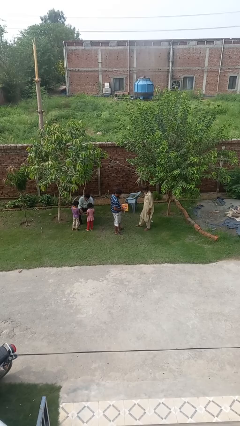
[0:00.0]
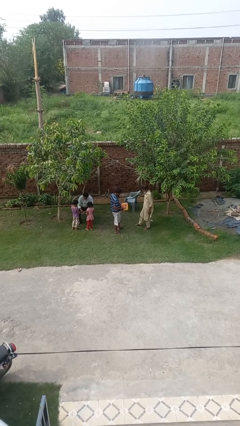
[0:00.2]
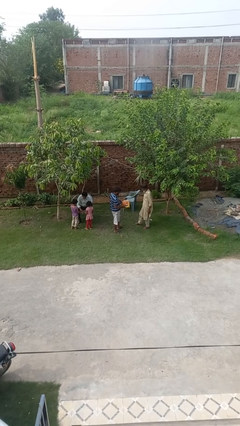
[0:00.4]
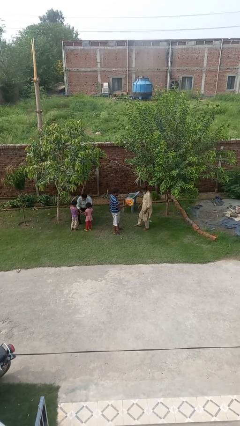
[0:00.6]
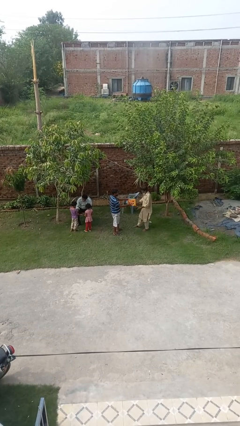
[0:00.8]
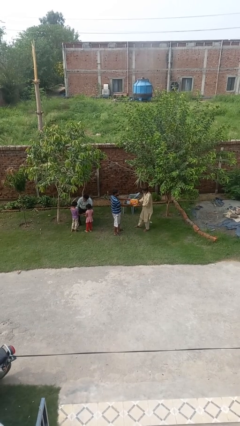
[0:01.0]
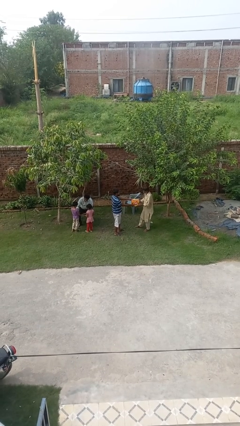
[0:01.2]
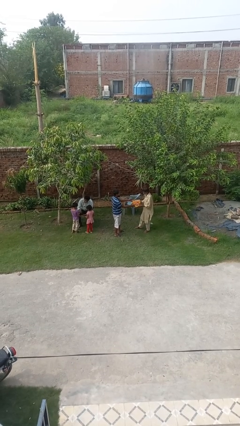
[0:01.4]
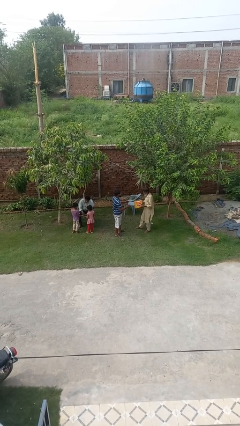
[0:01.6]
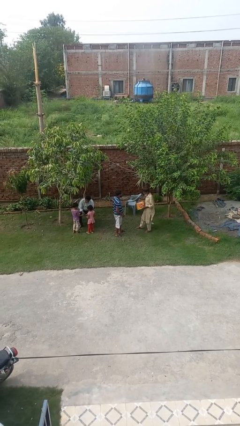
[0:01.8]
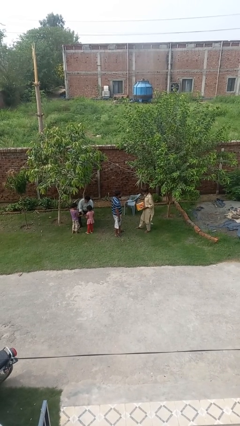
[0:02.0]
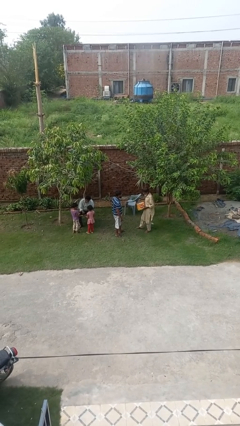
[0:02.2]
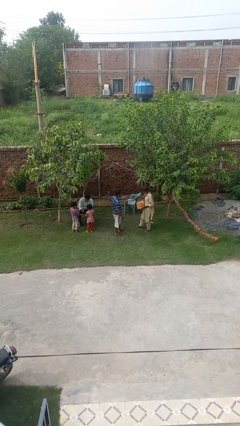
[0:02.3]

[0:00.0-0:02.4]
person transfers object to person

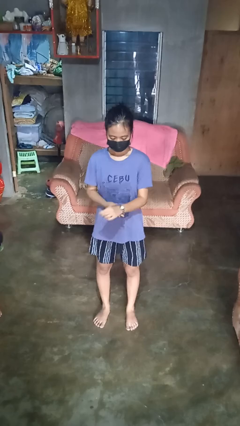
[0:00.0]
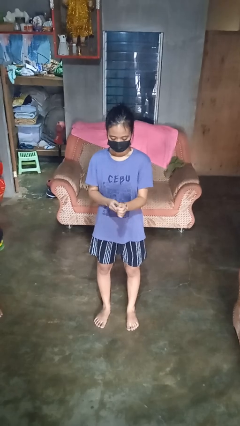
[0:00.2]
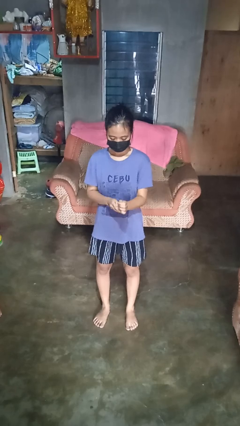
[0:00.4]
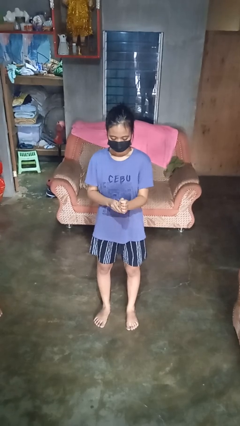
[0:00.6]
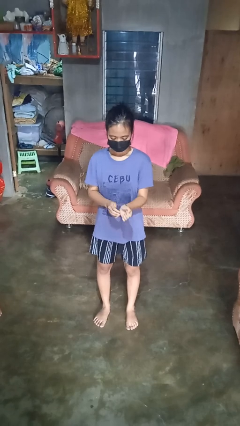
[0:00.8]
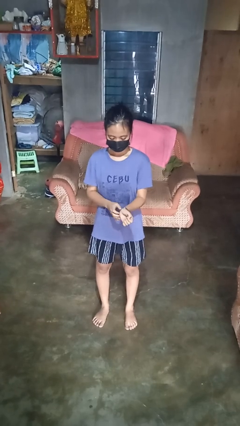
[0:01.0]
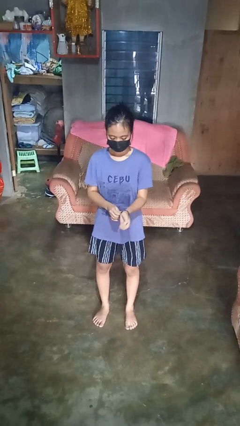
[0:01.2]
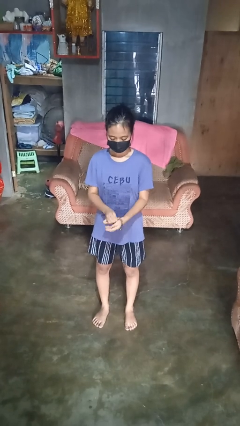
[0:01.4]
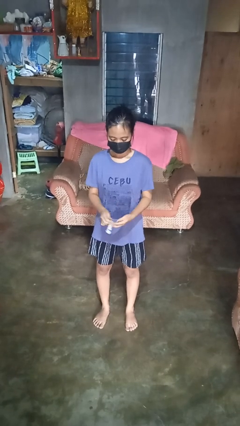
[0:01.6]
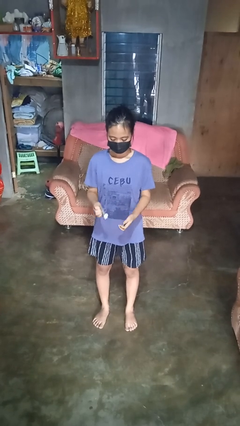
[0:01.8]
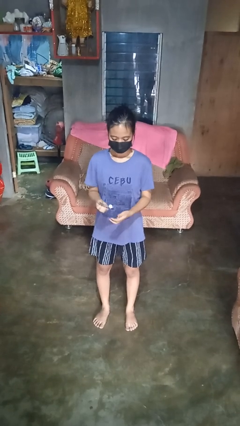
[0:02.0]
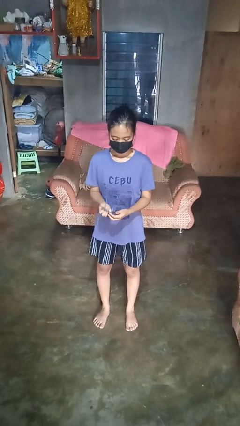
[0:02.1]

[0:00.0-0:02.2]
person takes off wristwatch

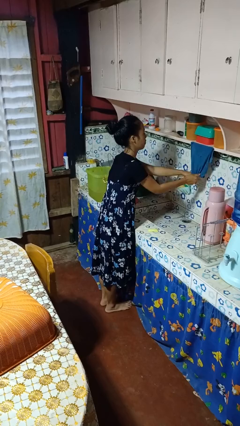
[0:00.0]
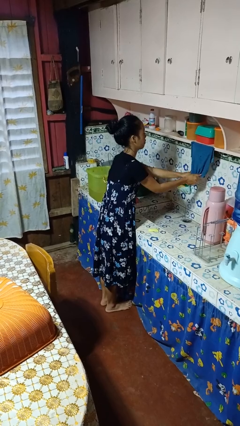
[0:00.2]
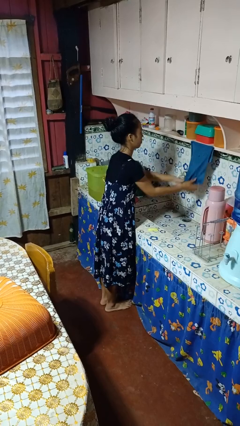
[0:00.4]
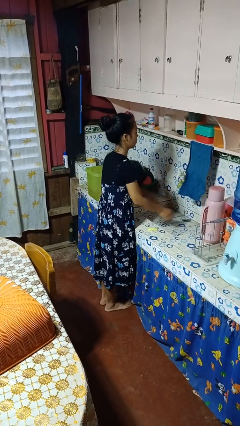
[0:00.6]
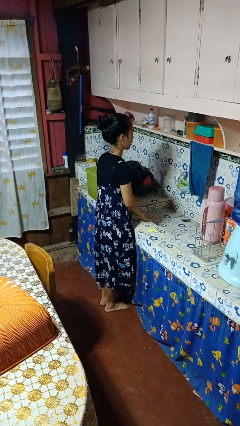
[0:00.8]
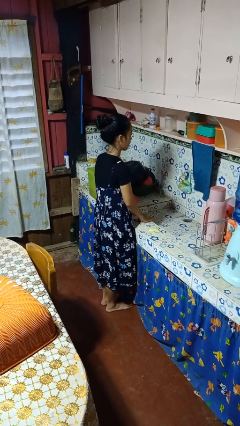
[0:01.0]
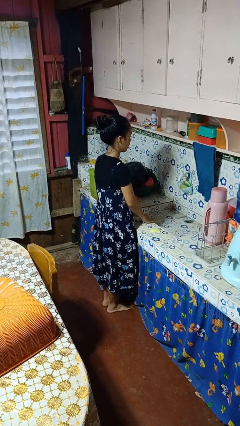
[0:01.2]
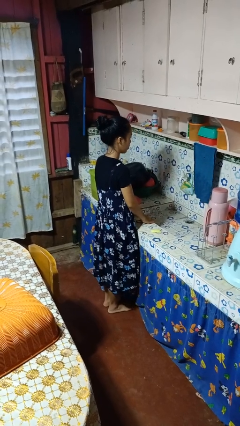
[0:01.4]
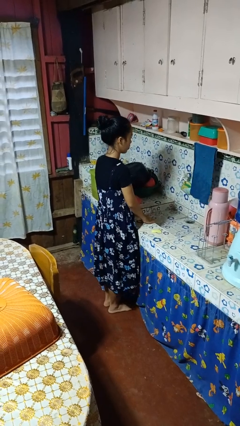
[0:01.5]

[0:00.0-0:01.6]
person dries hands with towel

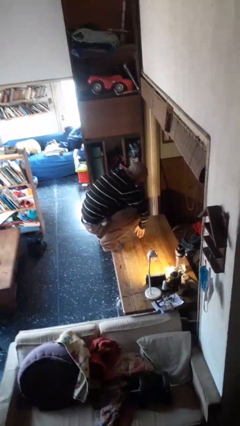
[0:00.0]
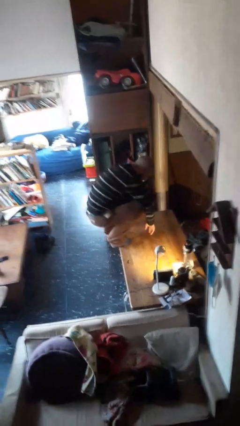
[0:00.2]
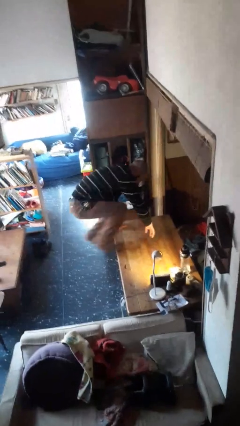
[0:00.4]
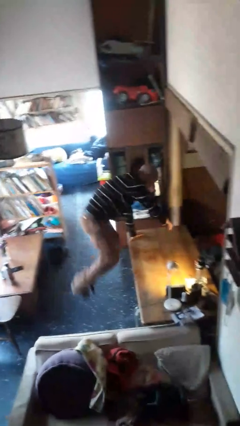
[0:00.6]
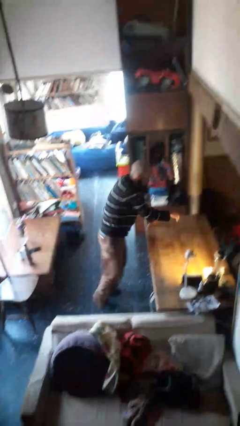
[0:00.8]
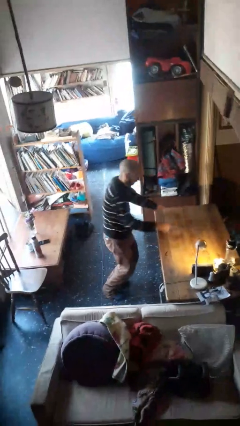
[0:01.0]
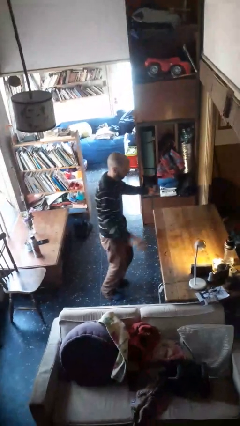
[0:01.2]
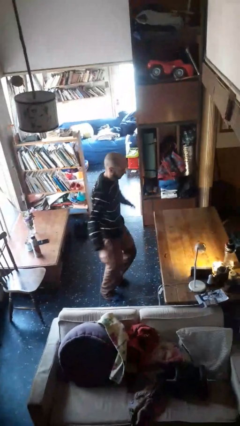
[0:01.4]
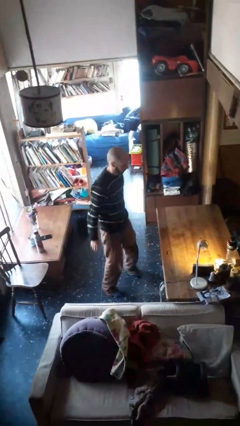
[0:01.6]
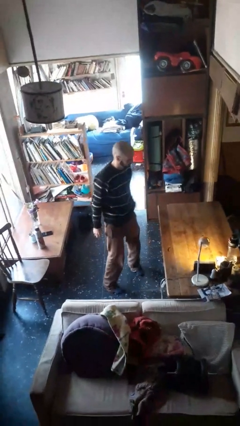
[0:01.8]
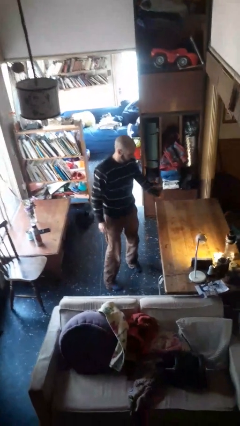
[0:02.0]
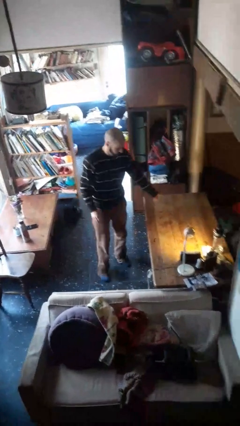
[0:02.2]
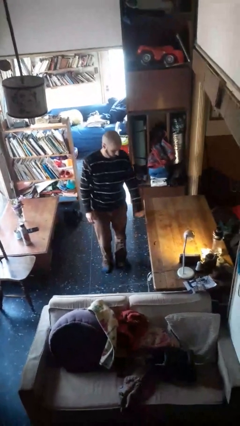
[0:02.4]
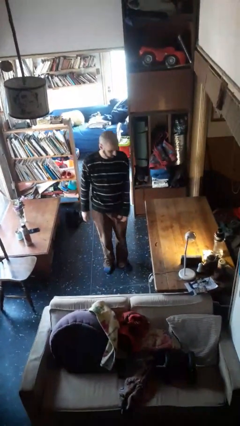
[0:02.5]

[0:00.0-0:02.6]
person climbs off table

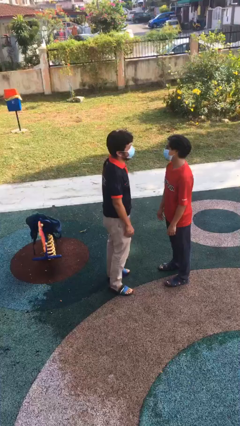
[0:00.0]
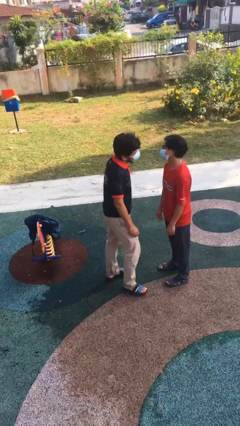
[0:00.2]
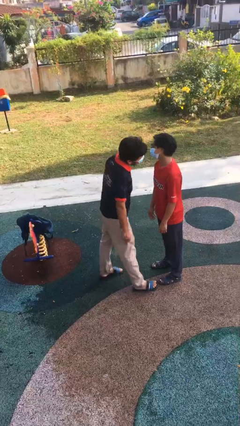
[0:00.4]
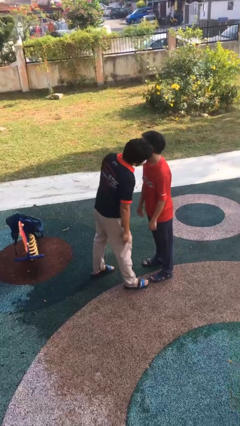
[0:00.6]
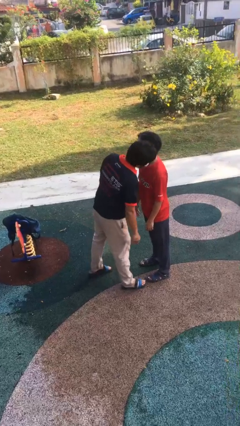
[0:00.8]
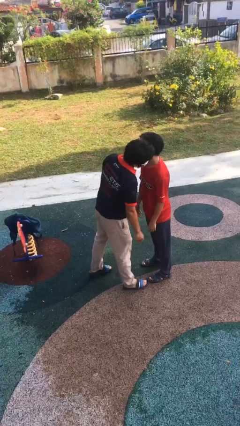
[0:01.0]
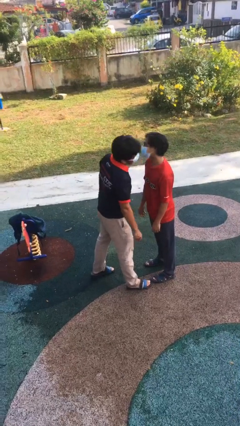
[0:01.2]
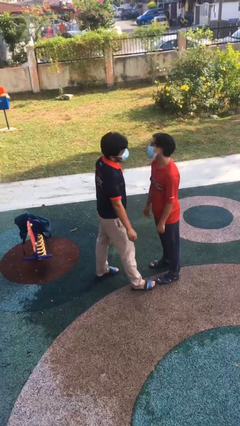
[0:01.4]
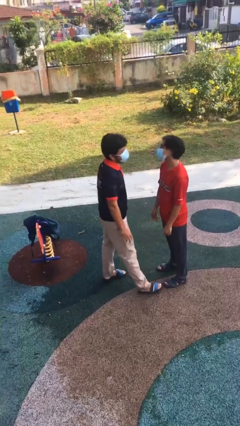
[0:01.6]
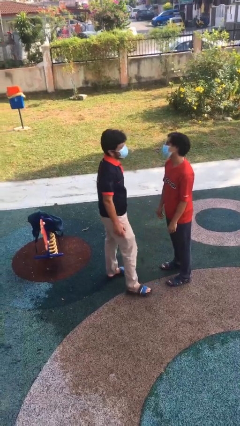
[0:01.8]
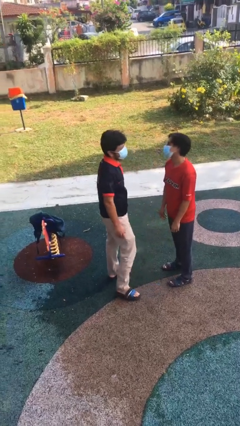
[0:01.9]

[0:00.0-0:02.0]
person kisses cheek of person

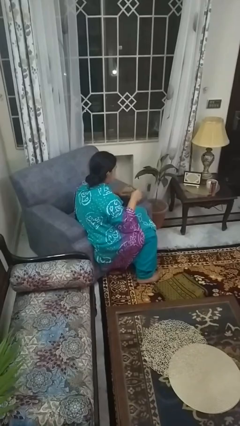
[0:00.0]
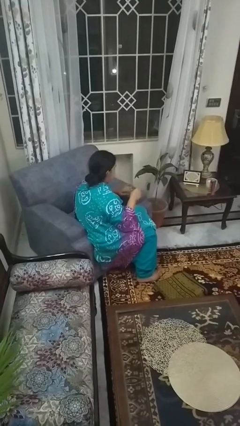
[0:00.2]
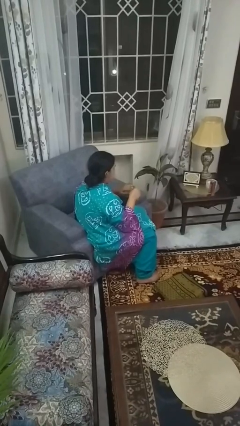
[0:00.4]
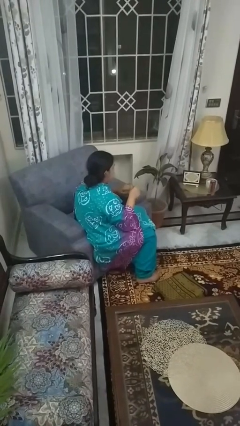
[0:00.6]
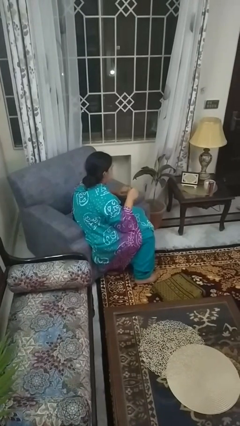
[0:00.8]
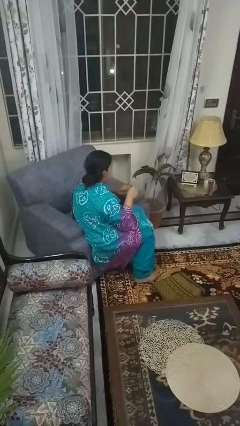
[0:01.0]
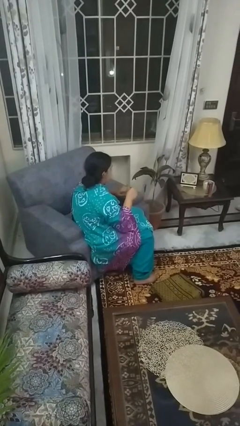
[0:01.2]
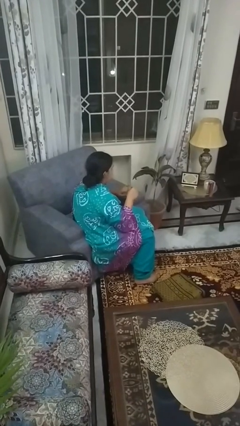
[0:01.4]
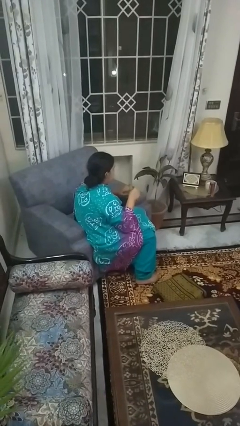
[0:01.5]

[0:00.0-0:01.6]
person files fingernails

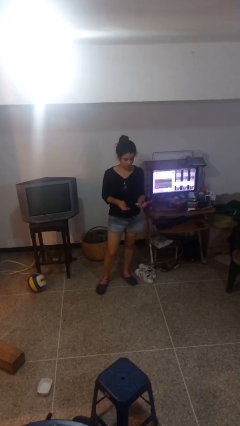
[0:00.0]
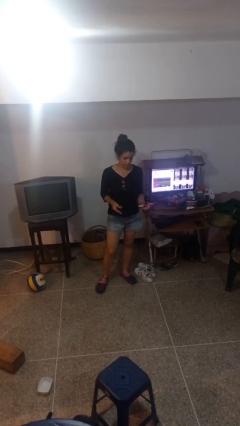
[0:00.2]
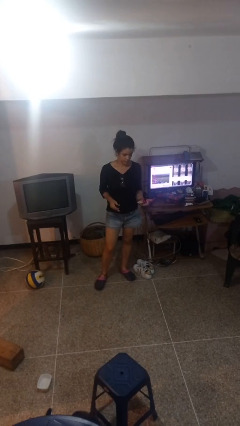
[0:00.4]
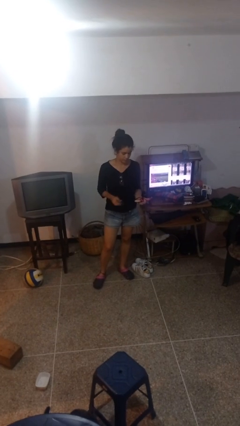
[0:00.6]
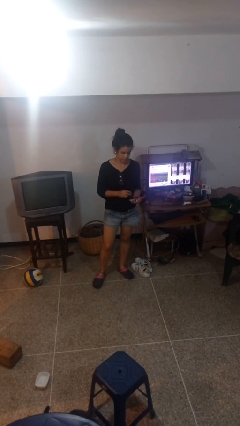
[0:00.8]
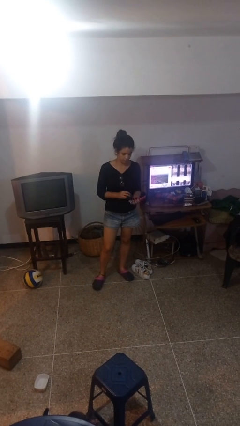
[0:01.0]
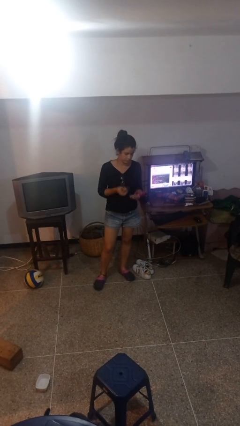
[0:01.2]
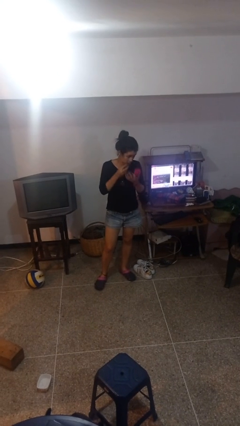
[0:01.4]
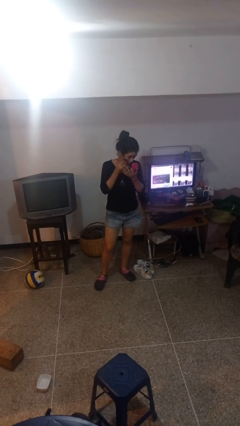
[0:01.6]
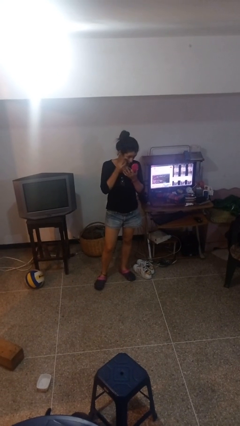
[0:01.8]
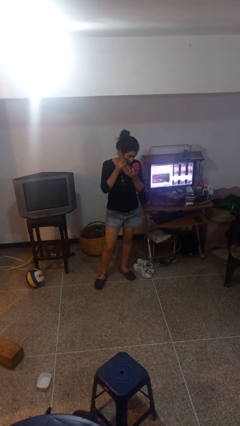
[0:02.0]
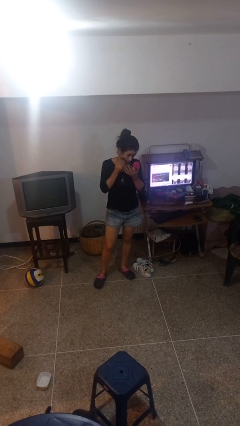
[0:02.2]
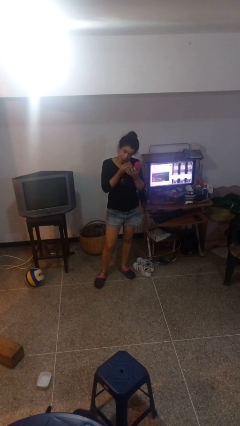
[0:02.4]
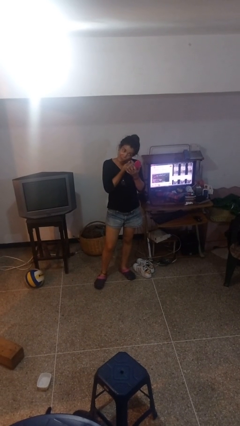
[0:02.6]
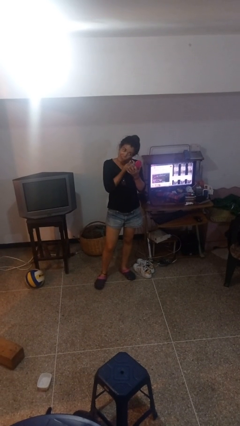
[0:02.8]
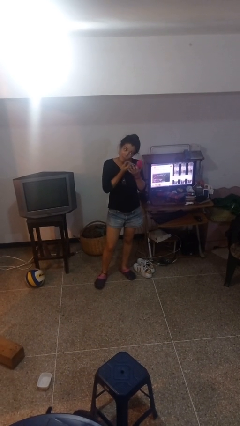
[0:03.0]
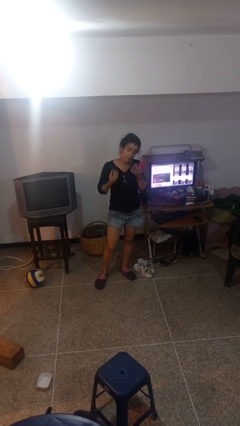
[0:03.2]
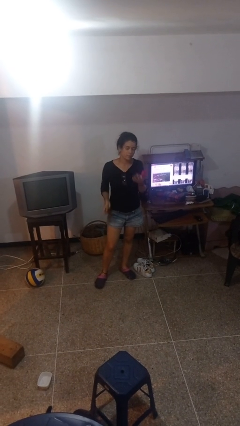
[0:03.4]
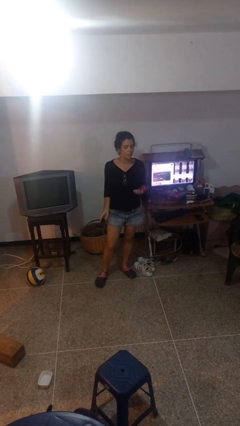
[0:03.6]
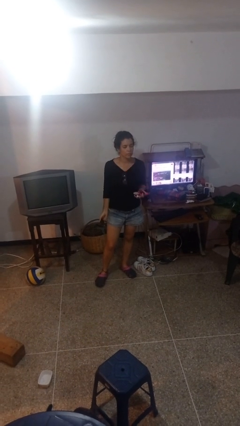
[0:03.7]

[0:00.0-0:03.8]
person applies foundation makeup

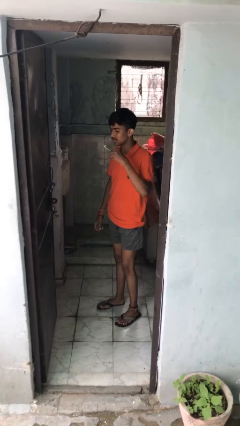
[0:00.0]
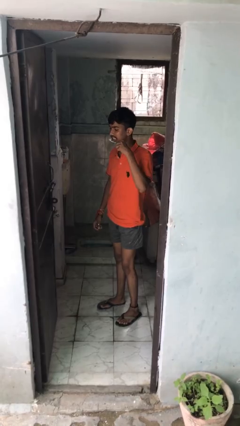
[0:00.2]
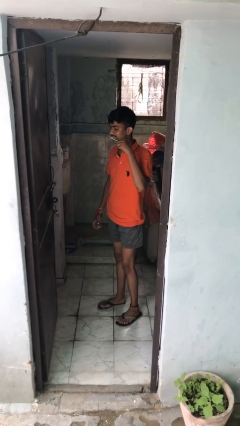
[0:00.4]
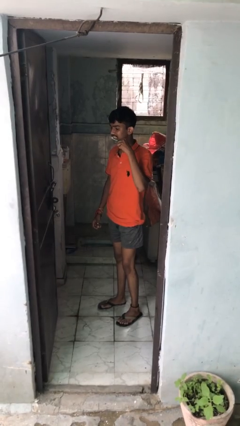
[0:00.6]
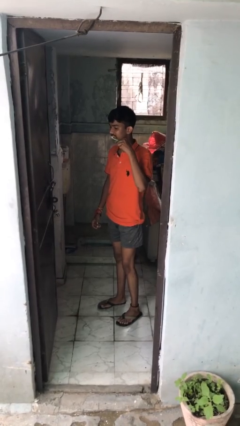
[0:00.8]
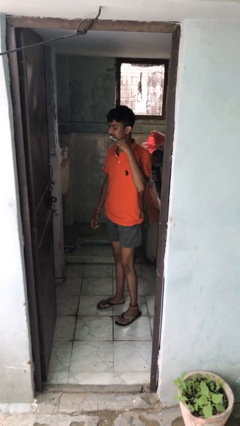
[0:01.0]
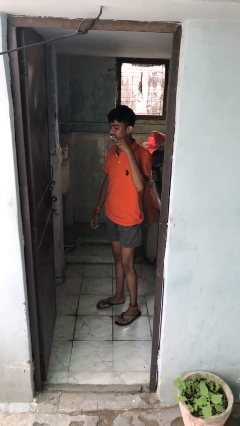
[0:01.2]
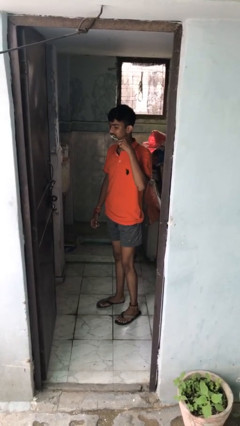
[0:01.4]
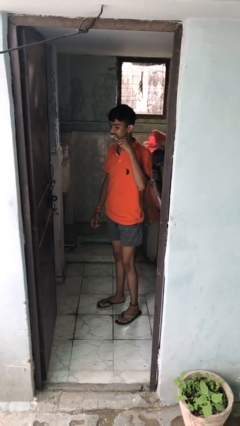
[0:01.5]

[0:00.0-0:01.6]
person brushes teeth
